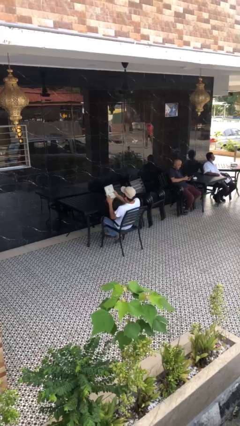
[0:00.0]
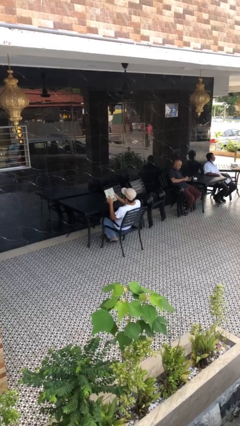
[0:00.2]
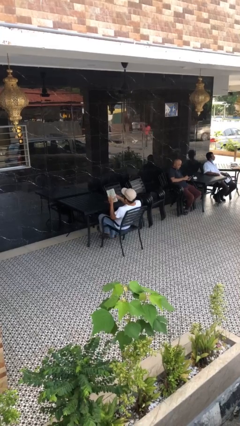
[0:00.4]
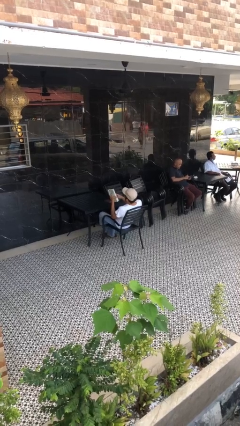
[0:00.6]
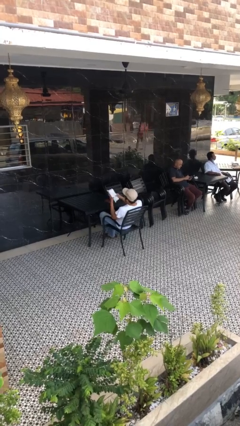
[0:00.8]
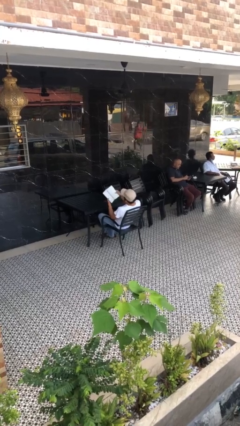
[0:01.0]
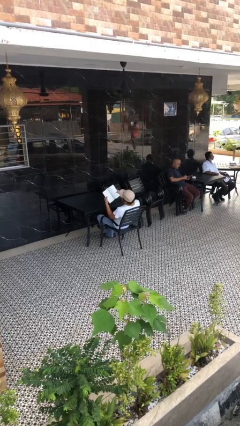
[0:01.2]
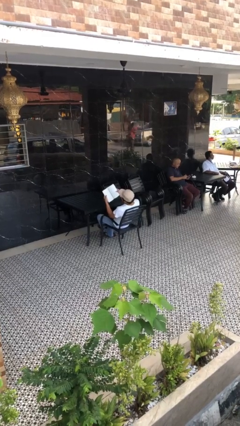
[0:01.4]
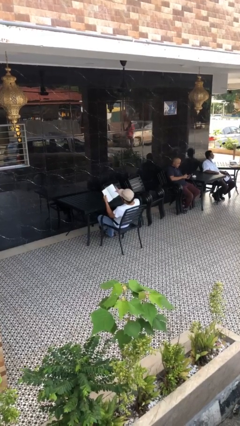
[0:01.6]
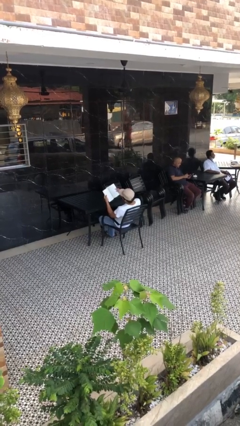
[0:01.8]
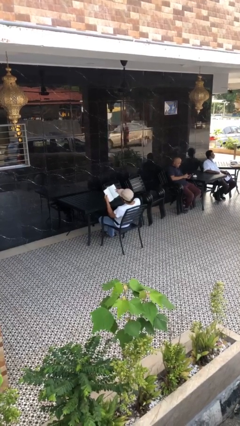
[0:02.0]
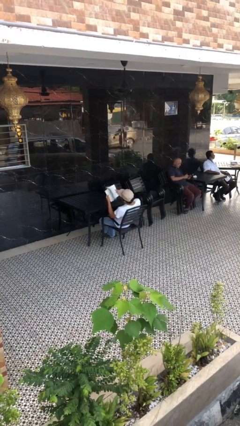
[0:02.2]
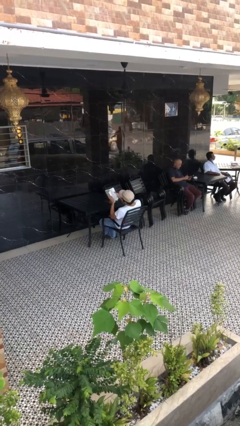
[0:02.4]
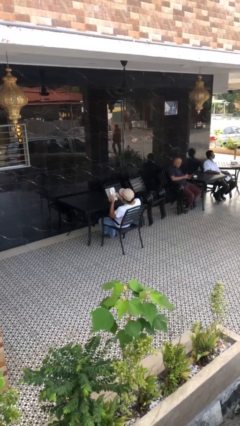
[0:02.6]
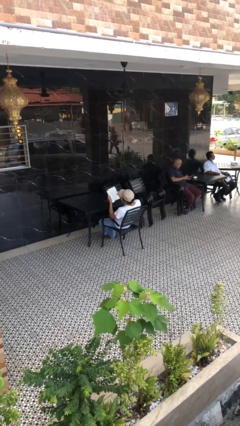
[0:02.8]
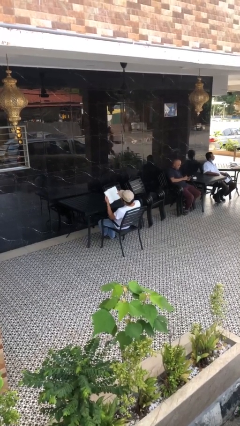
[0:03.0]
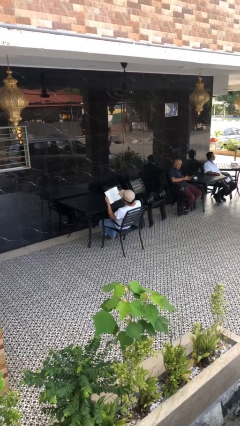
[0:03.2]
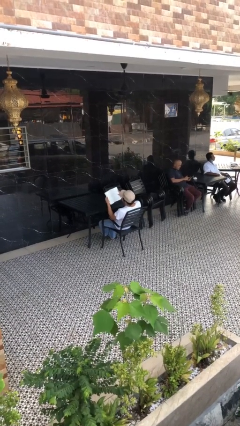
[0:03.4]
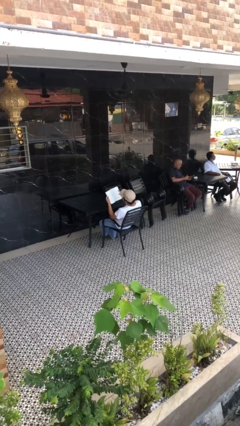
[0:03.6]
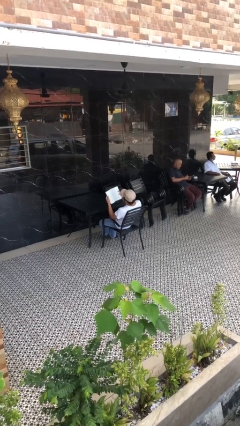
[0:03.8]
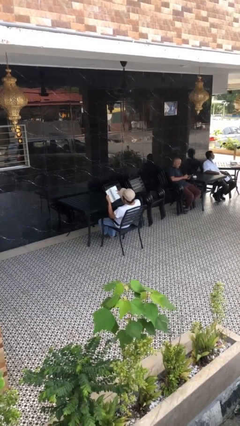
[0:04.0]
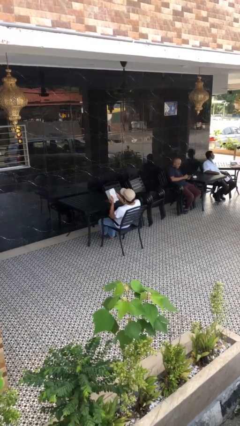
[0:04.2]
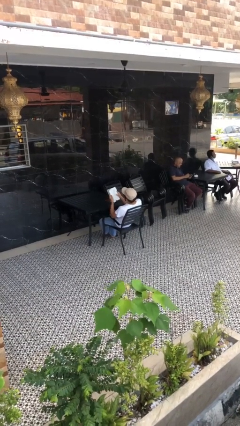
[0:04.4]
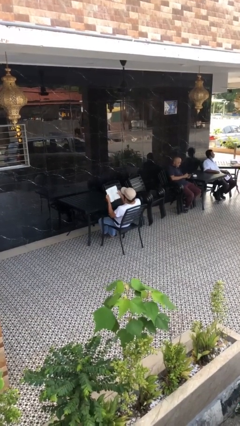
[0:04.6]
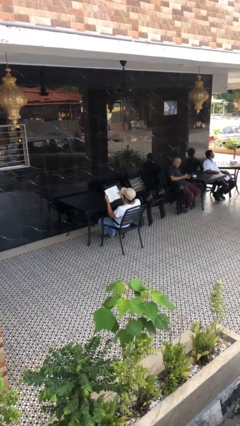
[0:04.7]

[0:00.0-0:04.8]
person reads document

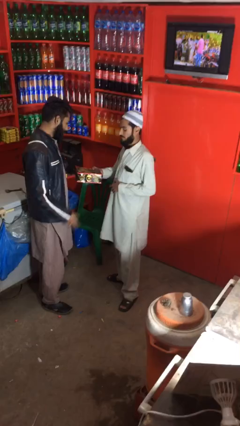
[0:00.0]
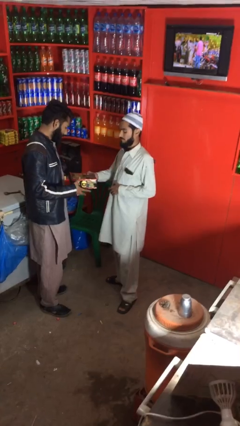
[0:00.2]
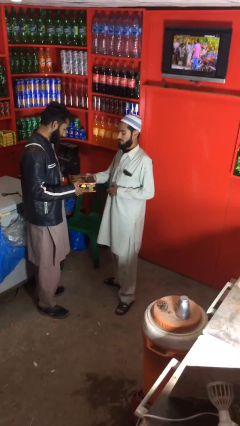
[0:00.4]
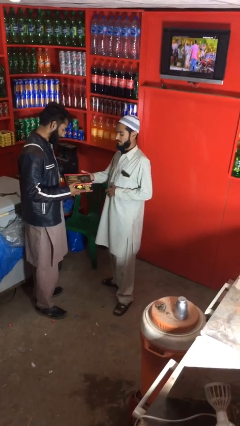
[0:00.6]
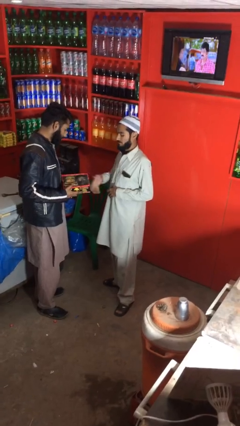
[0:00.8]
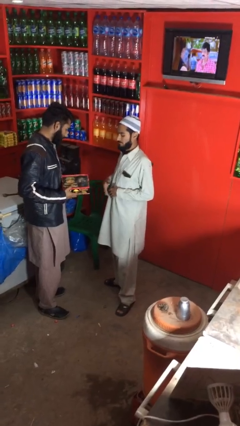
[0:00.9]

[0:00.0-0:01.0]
person transfers object to person

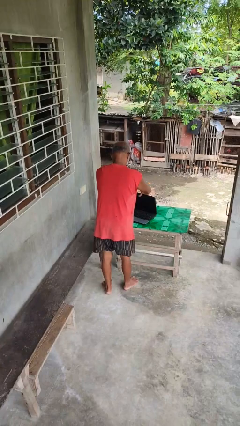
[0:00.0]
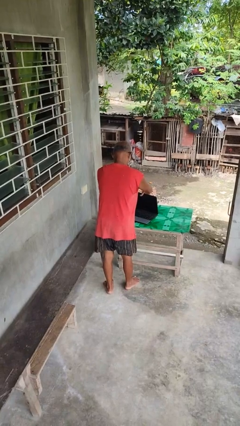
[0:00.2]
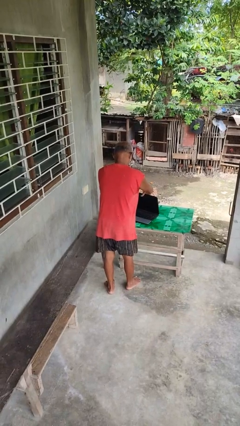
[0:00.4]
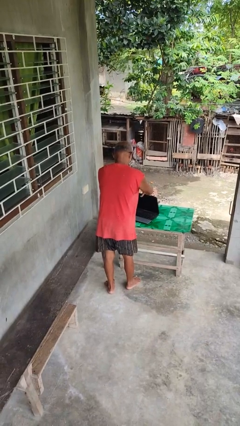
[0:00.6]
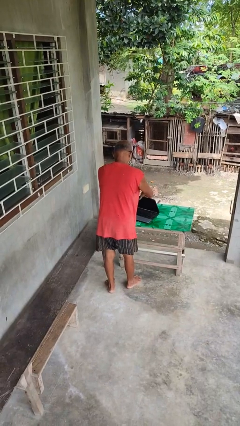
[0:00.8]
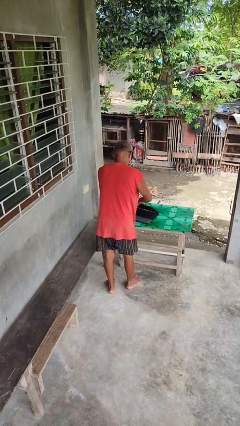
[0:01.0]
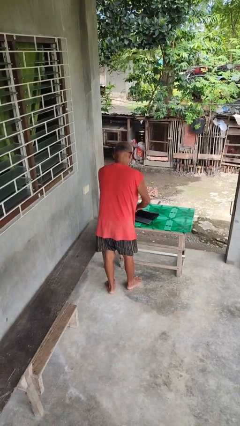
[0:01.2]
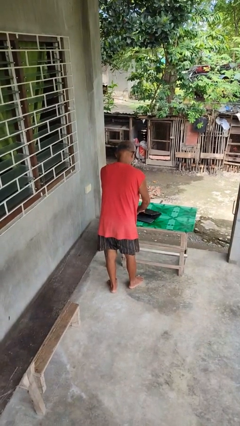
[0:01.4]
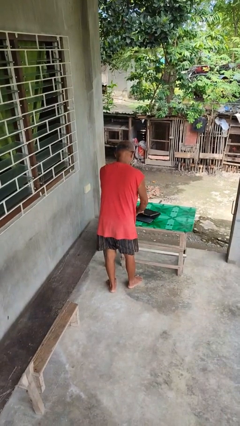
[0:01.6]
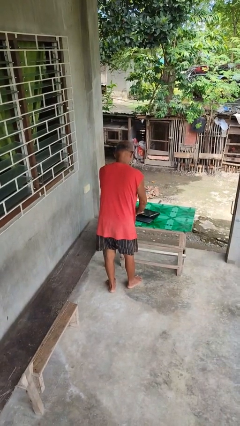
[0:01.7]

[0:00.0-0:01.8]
person closes laptop

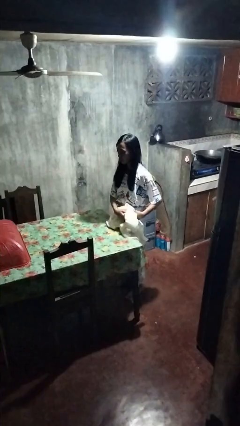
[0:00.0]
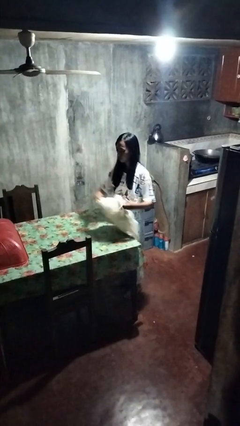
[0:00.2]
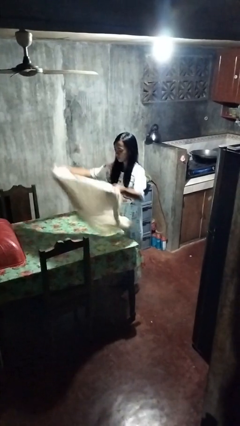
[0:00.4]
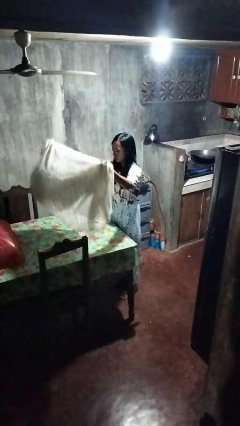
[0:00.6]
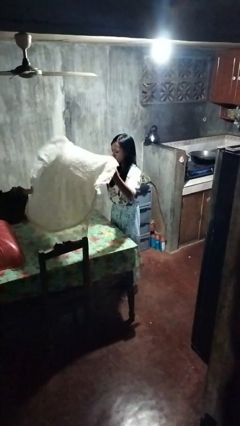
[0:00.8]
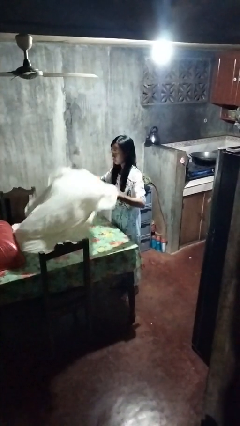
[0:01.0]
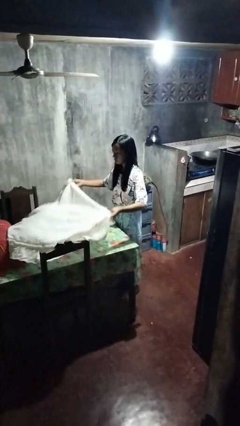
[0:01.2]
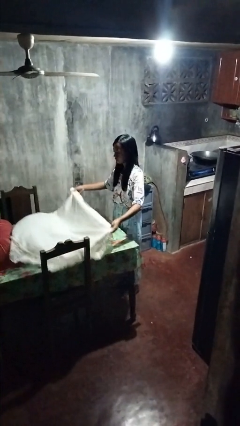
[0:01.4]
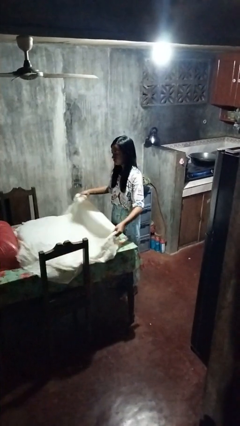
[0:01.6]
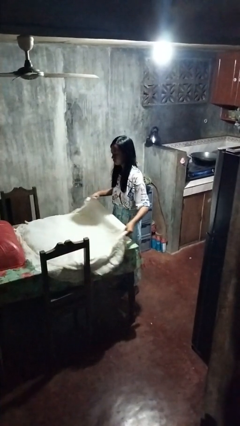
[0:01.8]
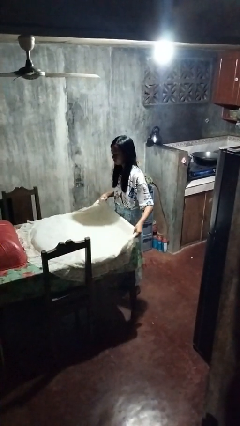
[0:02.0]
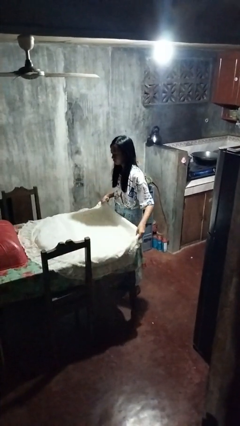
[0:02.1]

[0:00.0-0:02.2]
person spreads tablecloth

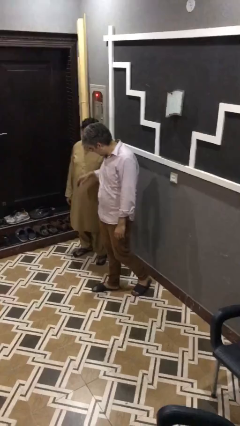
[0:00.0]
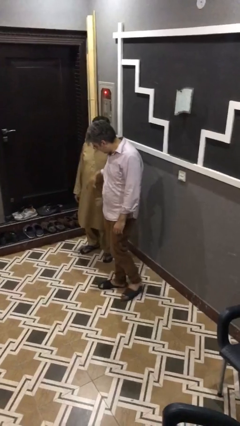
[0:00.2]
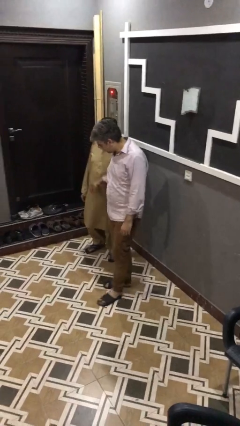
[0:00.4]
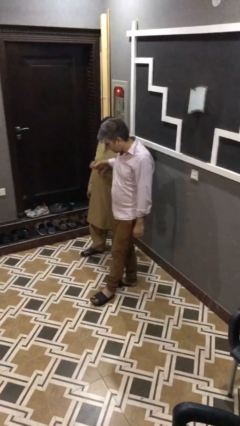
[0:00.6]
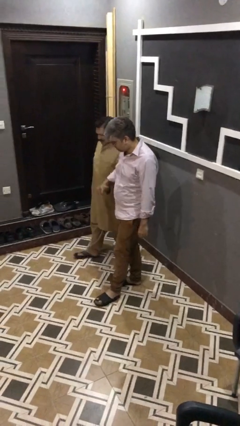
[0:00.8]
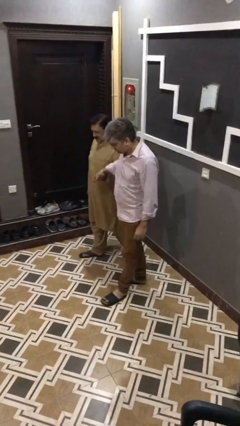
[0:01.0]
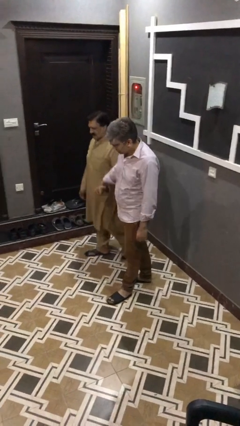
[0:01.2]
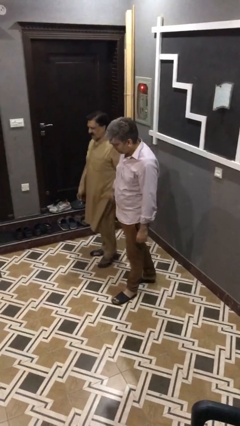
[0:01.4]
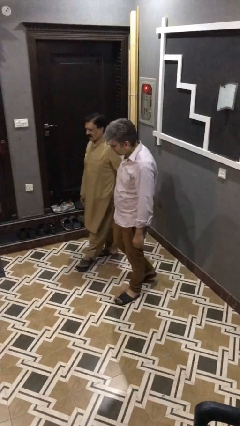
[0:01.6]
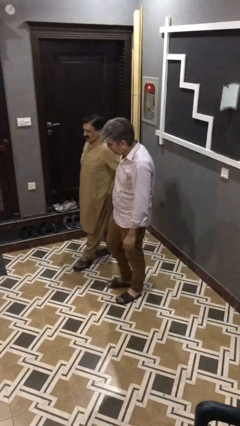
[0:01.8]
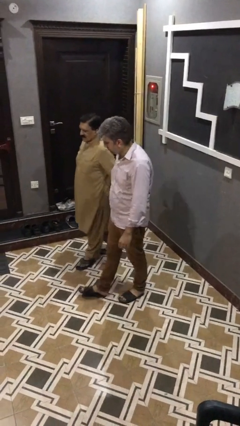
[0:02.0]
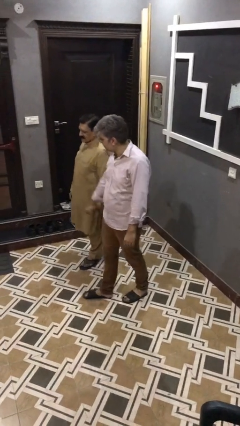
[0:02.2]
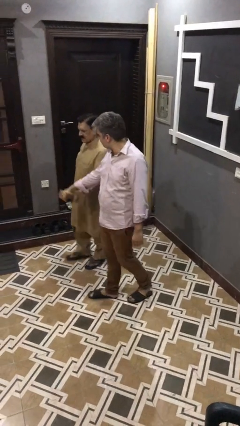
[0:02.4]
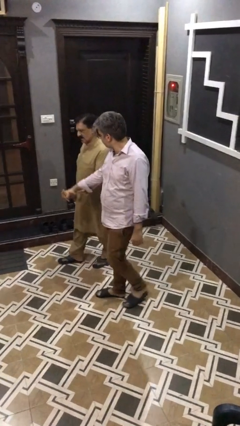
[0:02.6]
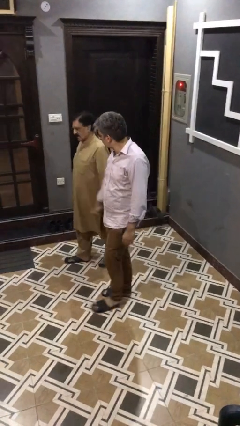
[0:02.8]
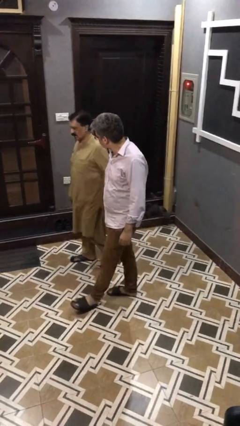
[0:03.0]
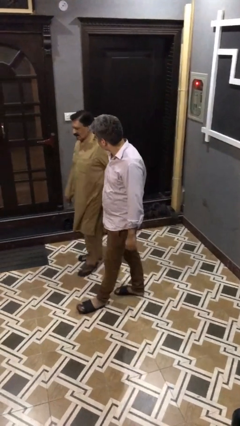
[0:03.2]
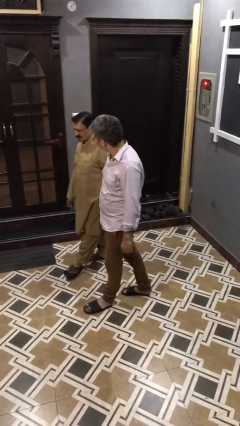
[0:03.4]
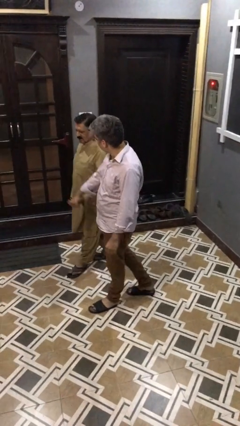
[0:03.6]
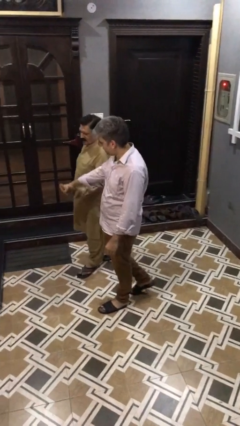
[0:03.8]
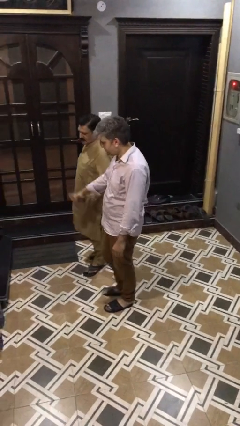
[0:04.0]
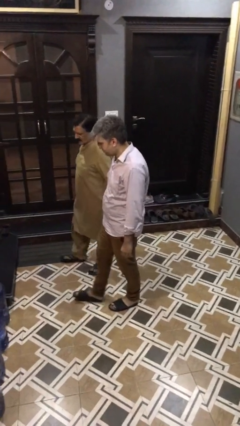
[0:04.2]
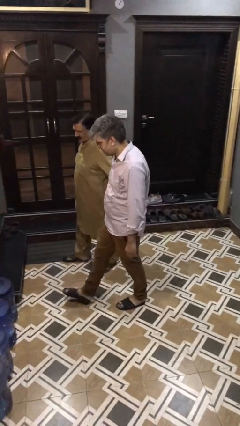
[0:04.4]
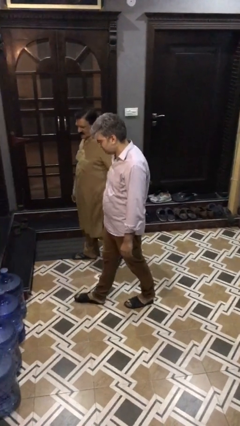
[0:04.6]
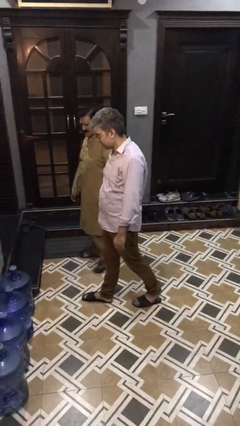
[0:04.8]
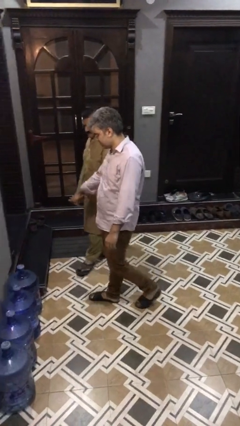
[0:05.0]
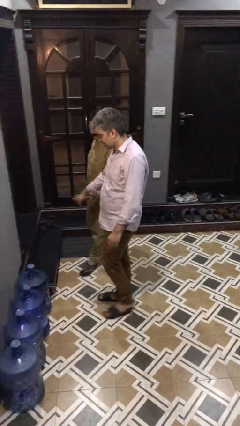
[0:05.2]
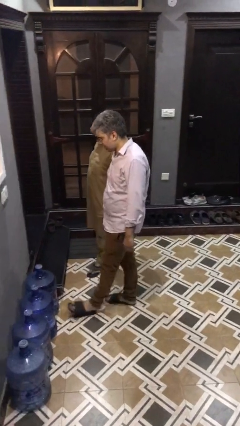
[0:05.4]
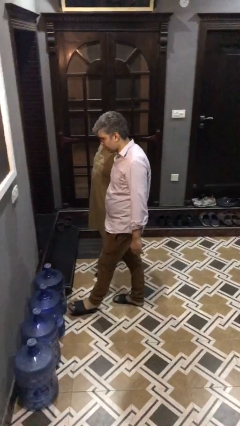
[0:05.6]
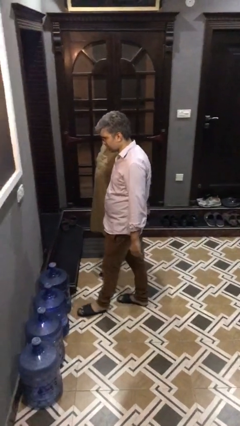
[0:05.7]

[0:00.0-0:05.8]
person holds hand

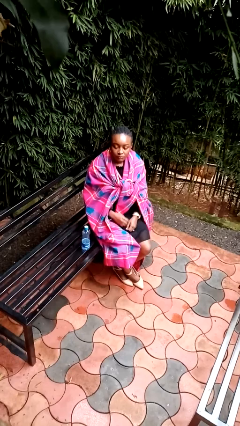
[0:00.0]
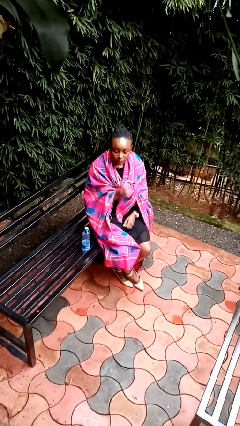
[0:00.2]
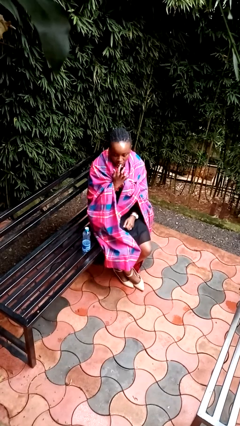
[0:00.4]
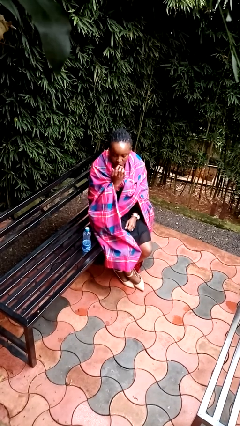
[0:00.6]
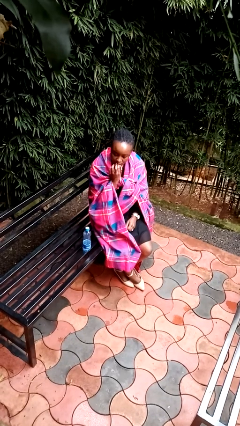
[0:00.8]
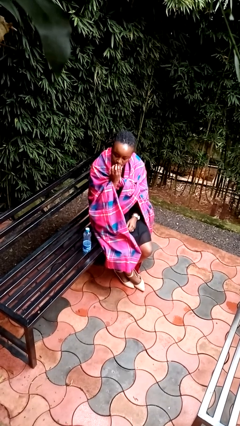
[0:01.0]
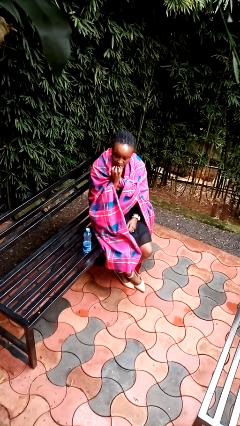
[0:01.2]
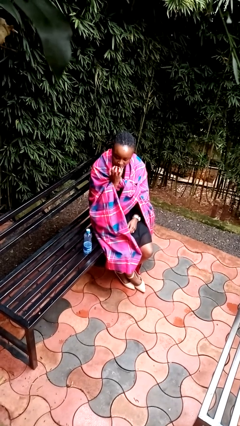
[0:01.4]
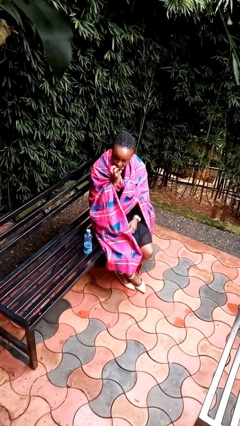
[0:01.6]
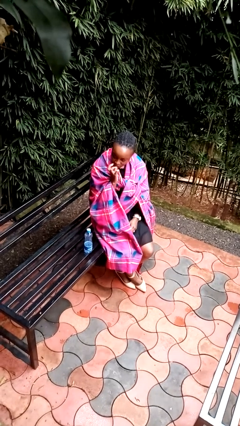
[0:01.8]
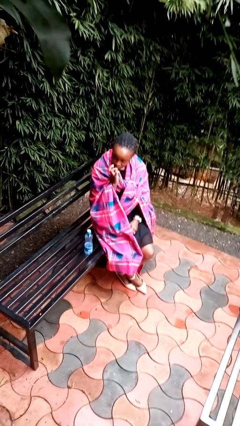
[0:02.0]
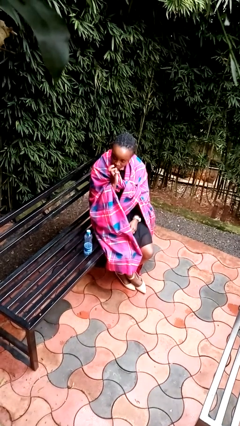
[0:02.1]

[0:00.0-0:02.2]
person licks fingers
